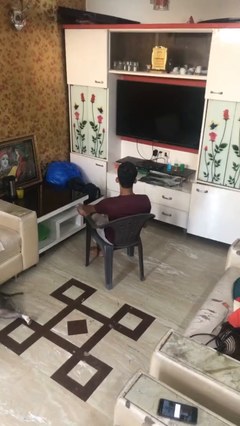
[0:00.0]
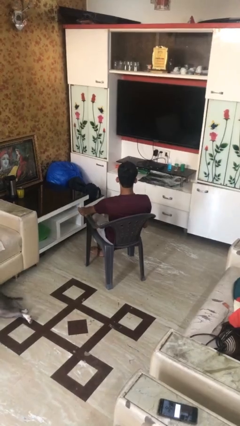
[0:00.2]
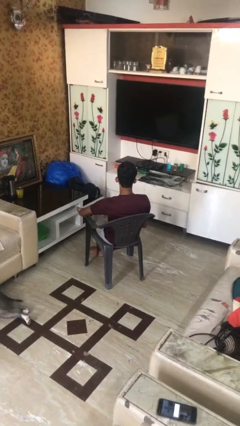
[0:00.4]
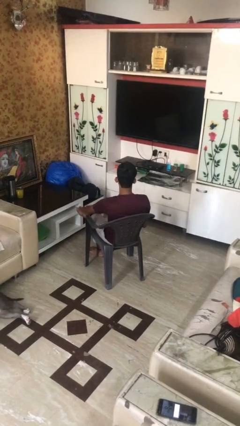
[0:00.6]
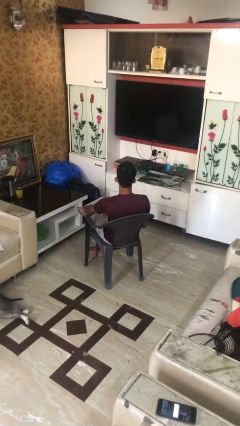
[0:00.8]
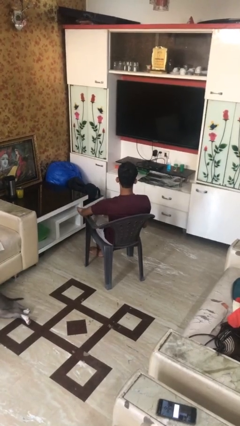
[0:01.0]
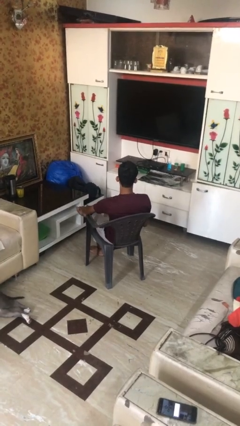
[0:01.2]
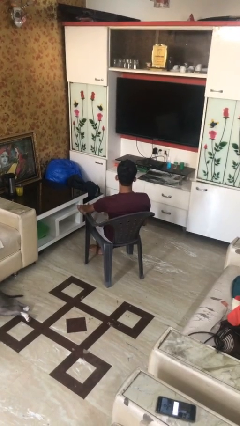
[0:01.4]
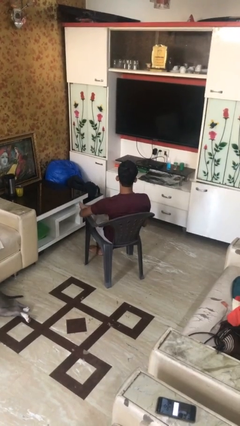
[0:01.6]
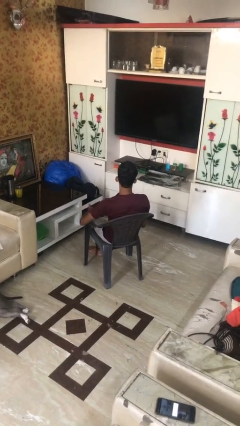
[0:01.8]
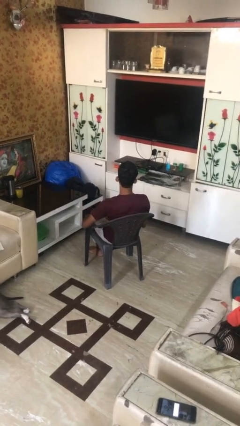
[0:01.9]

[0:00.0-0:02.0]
person rubs foot

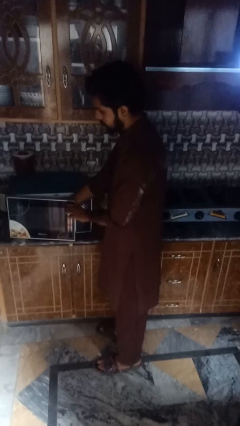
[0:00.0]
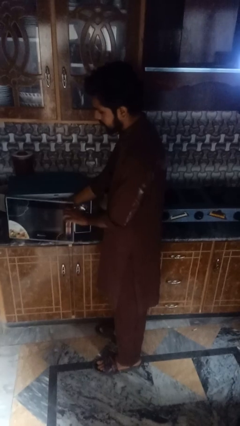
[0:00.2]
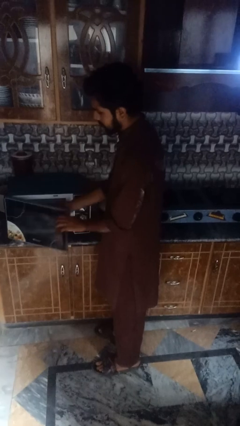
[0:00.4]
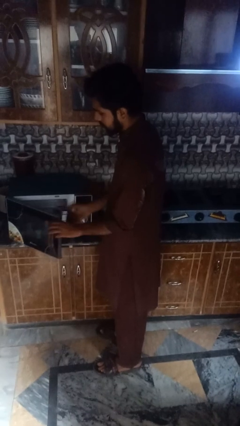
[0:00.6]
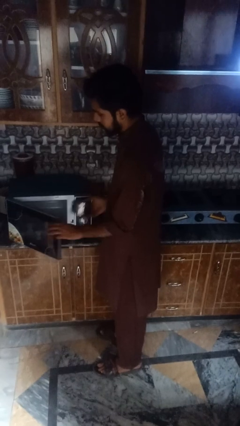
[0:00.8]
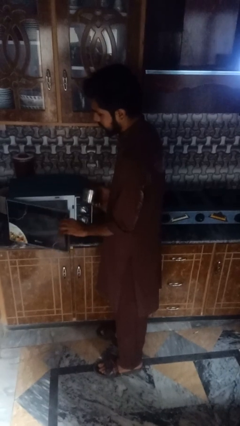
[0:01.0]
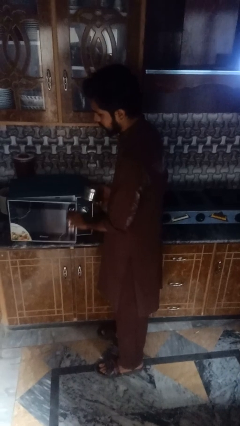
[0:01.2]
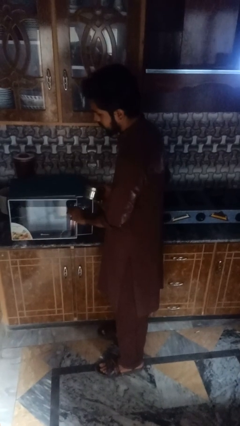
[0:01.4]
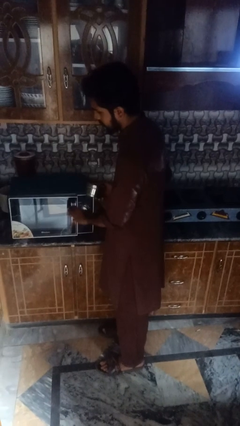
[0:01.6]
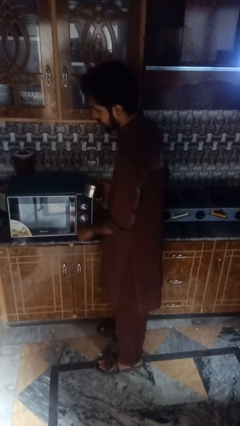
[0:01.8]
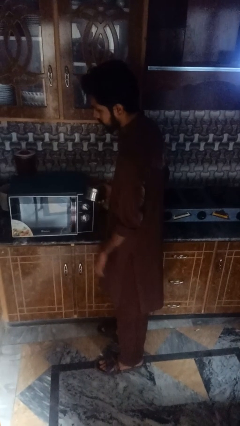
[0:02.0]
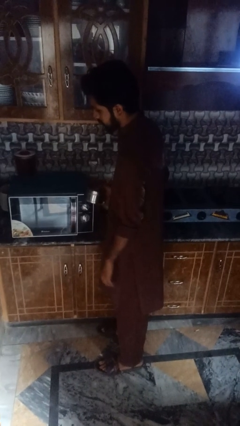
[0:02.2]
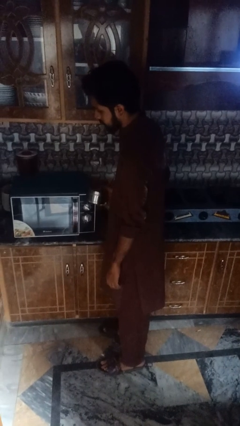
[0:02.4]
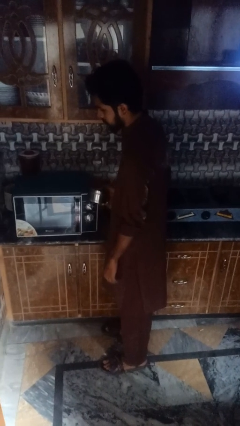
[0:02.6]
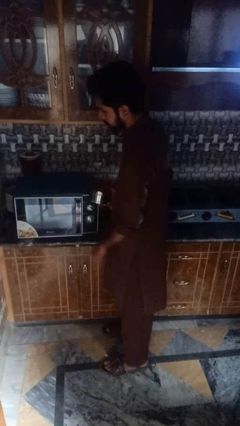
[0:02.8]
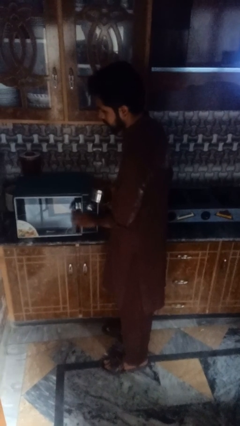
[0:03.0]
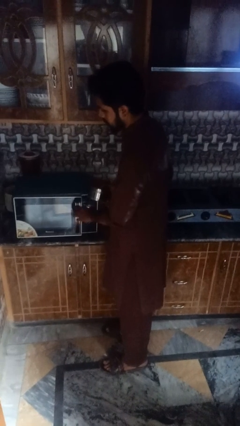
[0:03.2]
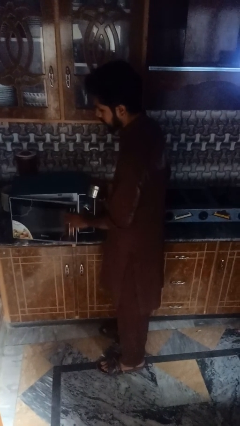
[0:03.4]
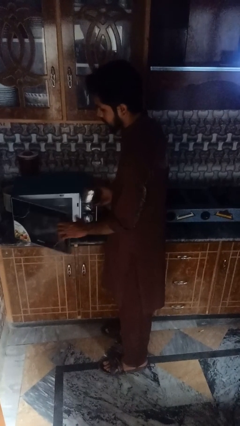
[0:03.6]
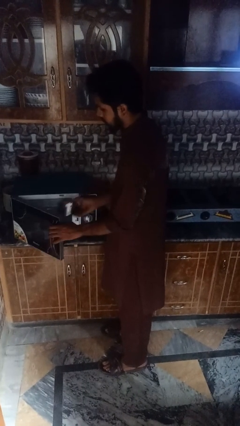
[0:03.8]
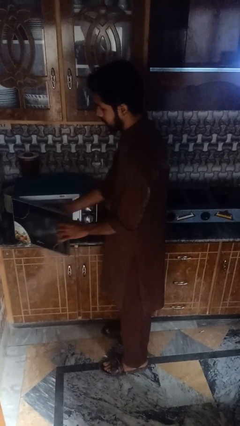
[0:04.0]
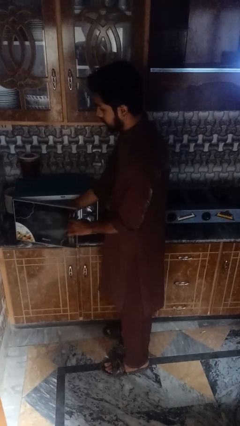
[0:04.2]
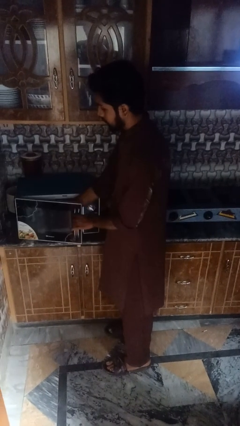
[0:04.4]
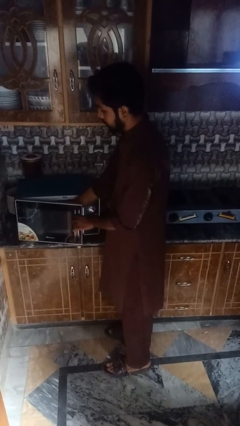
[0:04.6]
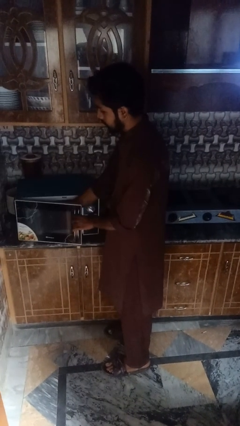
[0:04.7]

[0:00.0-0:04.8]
person takes object from microwave

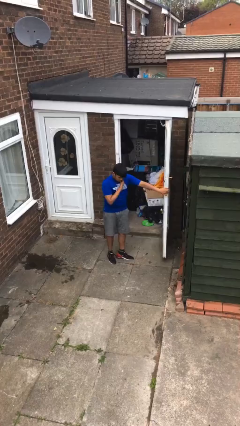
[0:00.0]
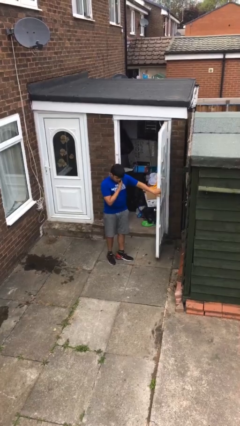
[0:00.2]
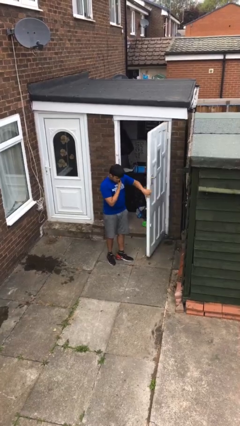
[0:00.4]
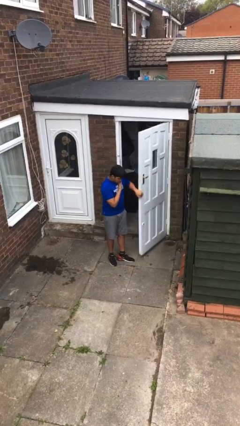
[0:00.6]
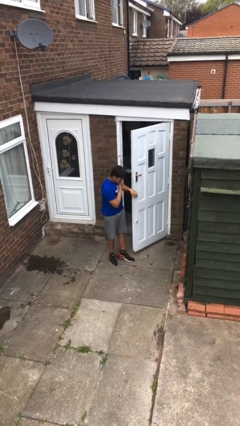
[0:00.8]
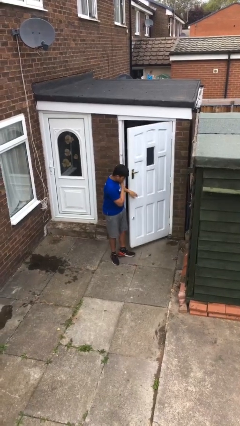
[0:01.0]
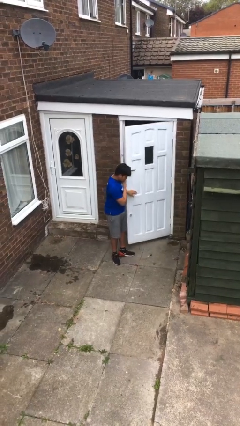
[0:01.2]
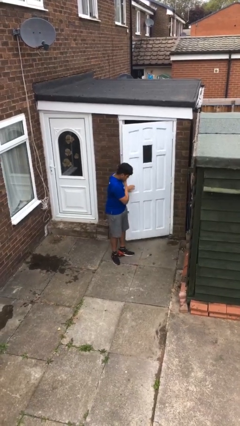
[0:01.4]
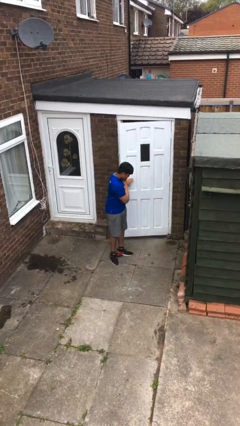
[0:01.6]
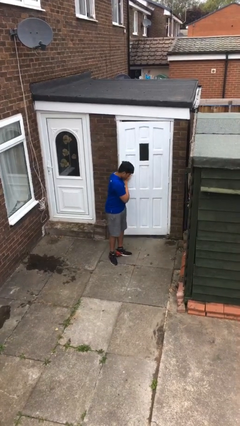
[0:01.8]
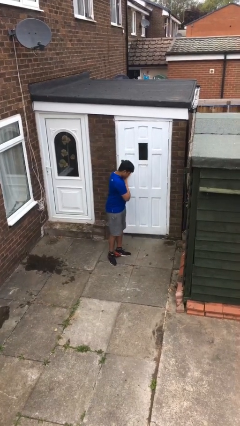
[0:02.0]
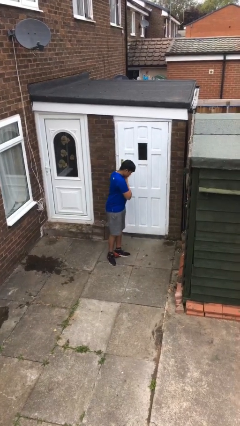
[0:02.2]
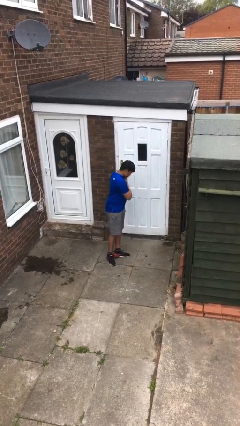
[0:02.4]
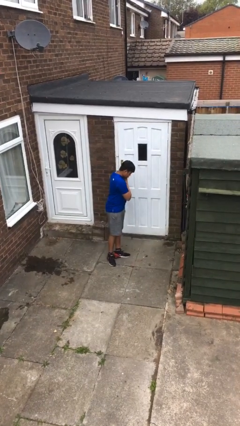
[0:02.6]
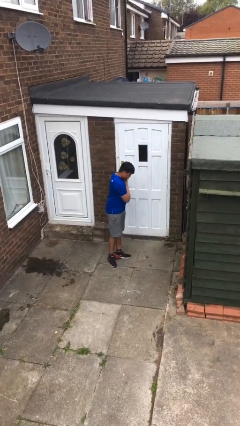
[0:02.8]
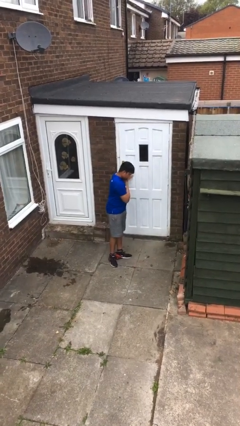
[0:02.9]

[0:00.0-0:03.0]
person closes facility door

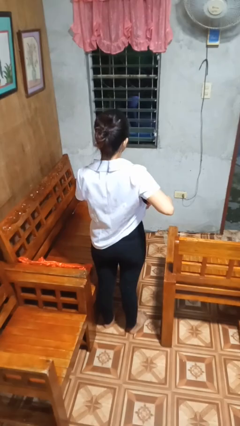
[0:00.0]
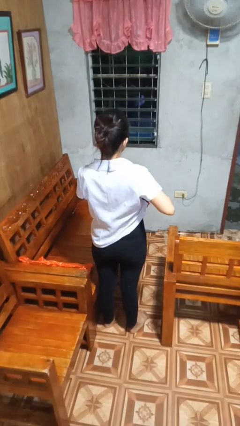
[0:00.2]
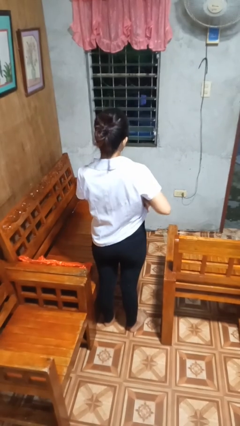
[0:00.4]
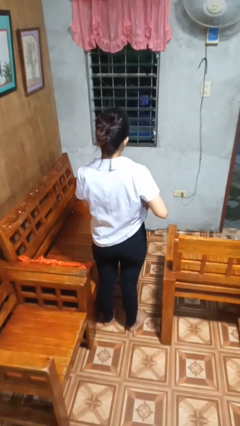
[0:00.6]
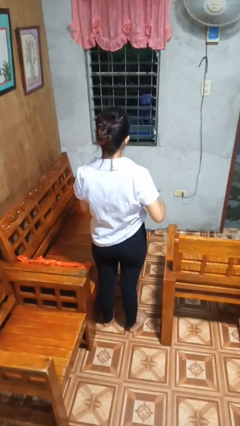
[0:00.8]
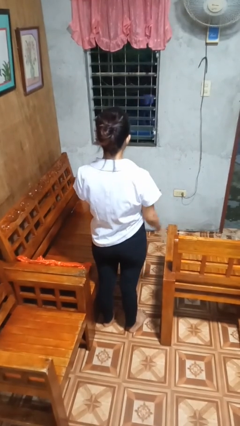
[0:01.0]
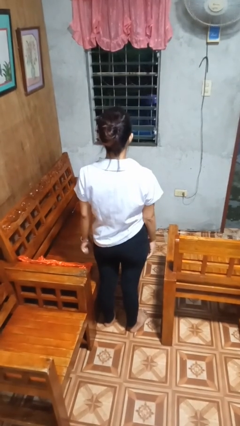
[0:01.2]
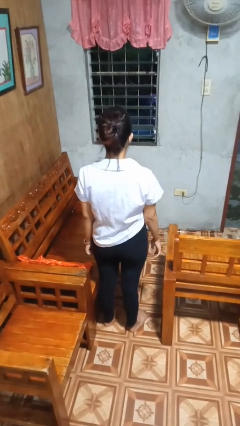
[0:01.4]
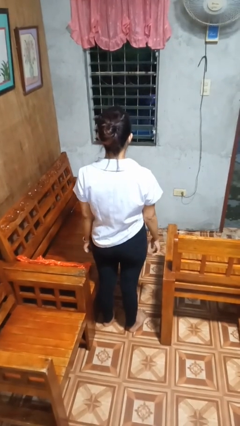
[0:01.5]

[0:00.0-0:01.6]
person puts phone into pocket

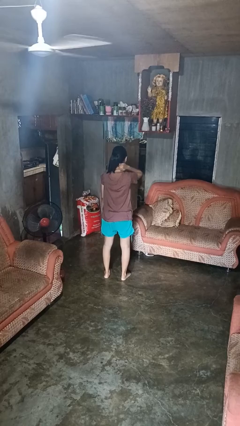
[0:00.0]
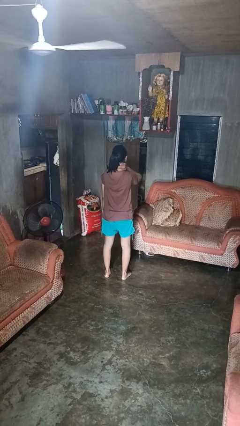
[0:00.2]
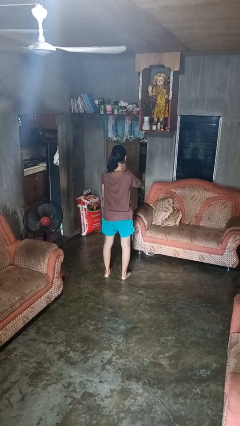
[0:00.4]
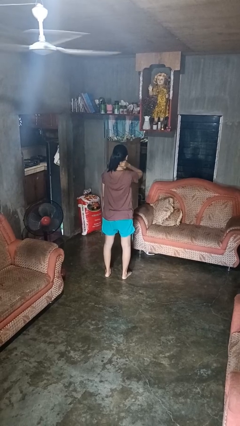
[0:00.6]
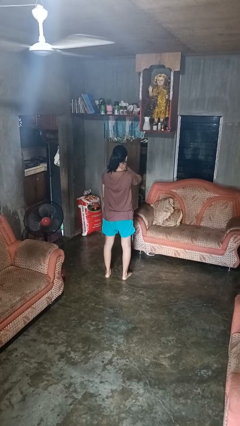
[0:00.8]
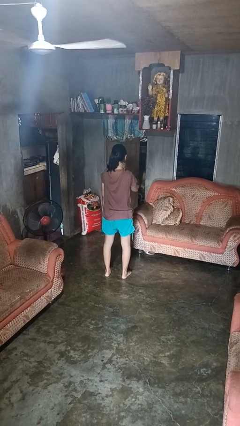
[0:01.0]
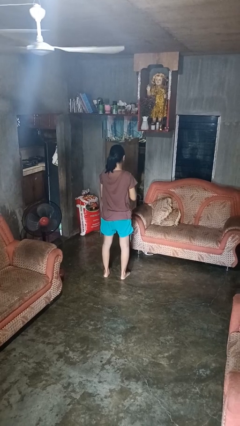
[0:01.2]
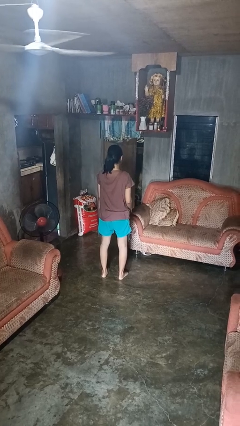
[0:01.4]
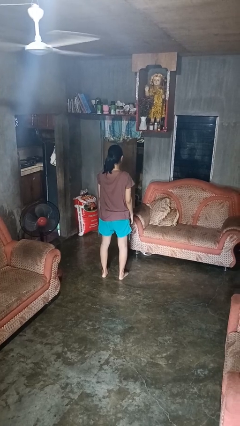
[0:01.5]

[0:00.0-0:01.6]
person rubs neck

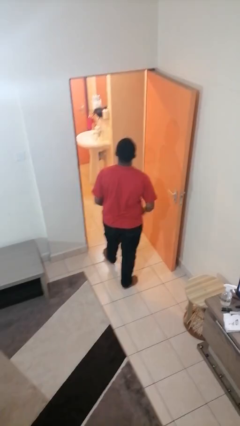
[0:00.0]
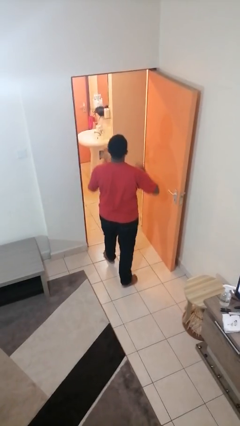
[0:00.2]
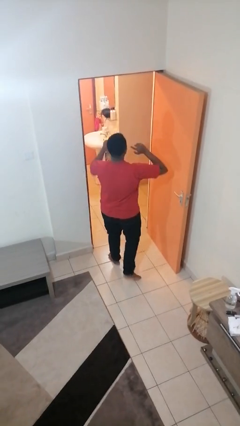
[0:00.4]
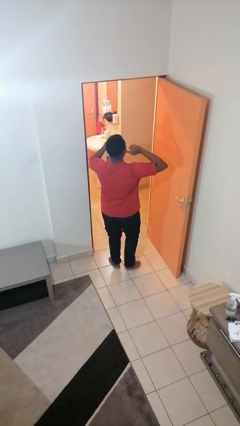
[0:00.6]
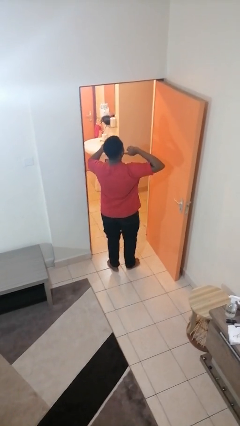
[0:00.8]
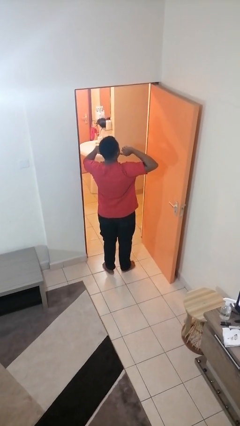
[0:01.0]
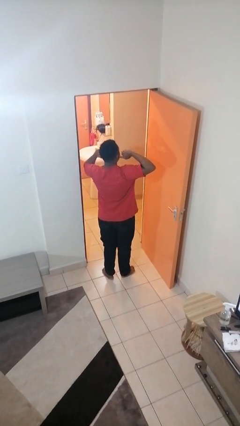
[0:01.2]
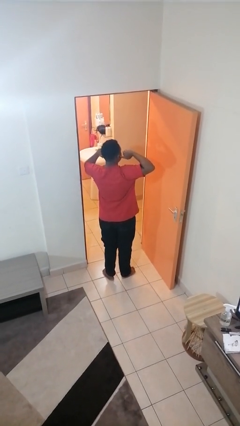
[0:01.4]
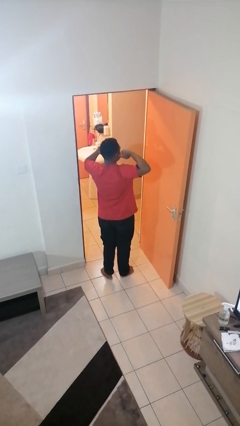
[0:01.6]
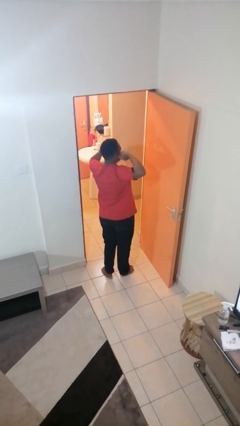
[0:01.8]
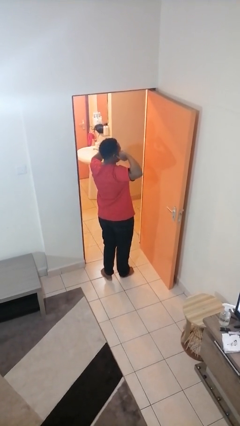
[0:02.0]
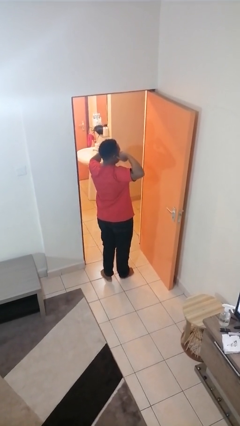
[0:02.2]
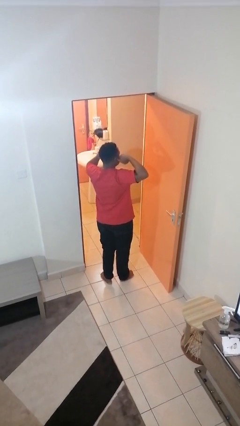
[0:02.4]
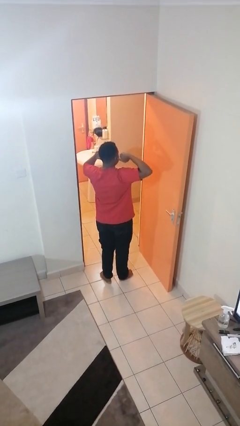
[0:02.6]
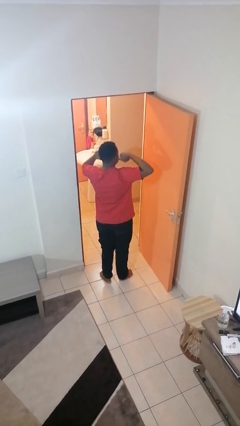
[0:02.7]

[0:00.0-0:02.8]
person puts fingers in ear

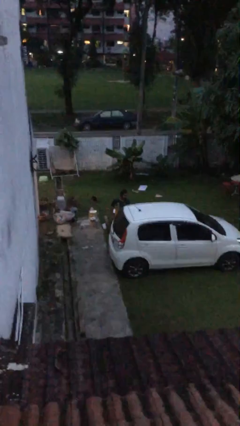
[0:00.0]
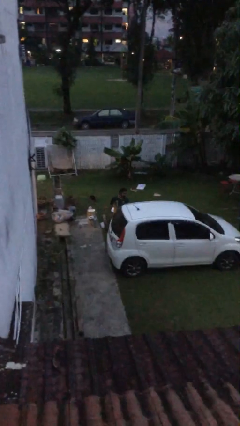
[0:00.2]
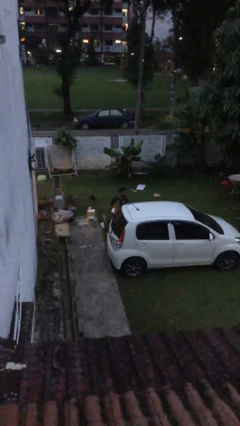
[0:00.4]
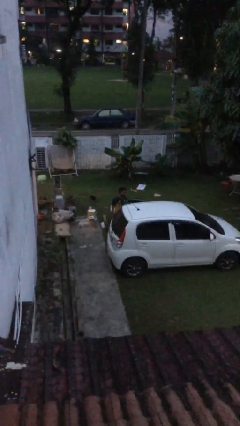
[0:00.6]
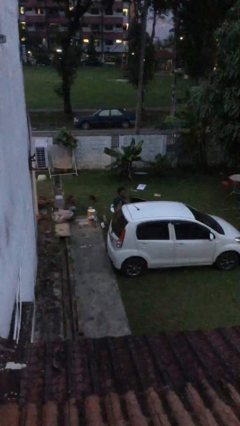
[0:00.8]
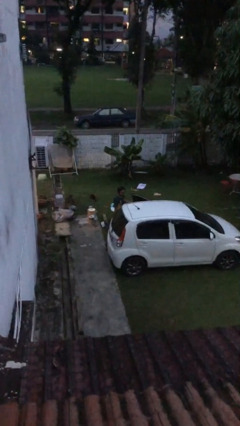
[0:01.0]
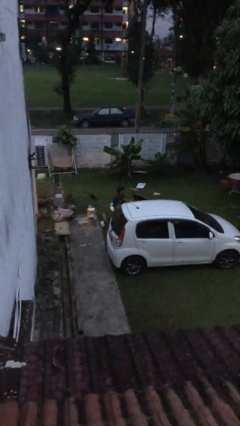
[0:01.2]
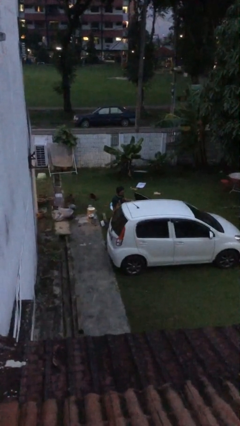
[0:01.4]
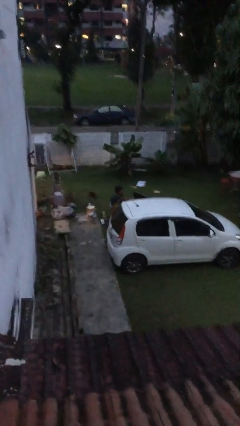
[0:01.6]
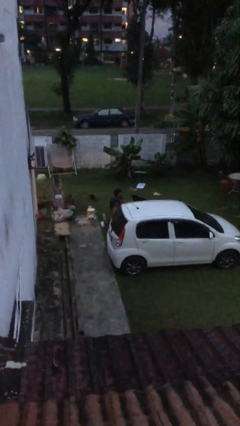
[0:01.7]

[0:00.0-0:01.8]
person opens car door
